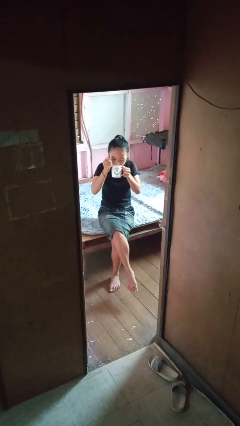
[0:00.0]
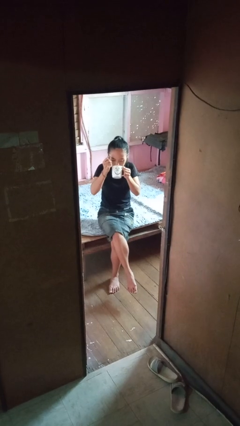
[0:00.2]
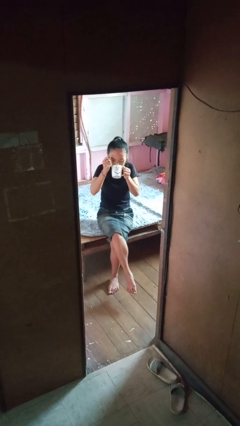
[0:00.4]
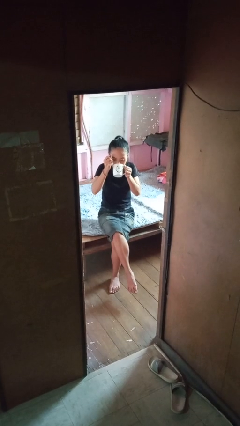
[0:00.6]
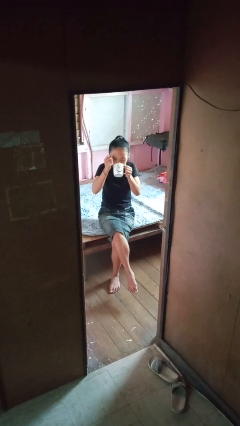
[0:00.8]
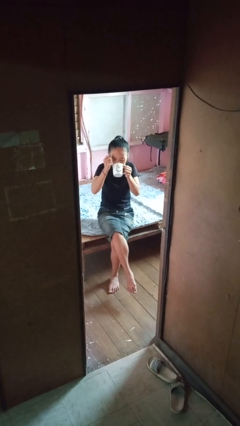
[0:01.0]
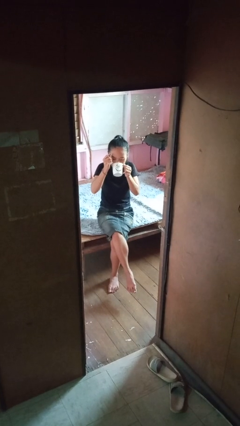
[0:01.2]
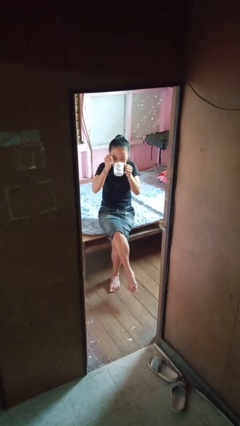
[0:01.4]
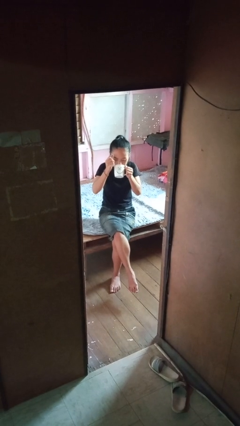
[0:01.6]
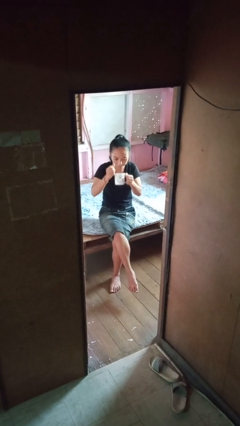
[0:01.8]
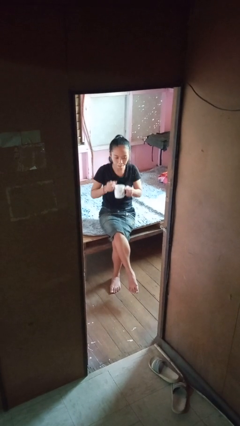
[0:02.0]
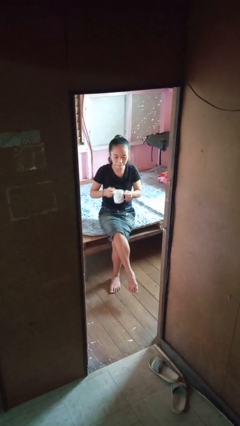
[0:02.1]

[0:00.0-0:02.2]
person drinks from mug

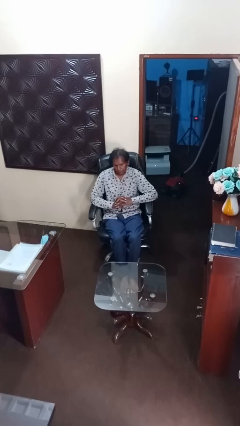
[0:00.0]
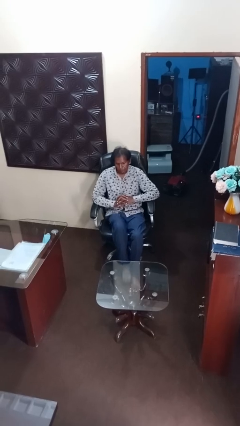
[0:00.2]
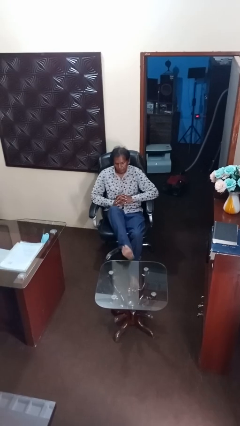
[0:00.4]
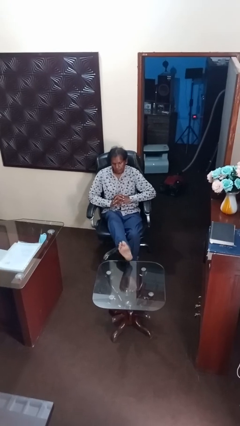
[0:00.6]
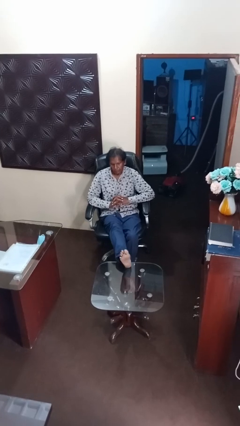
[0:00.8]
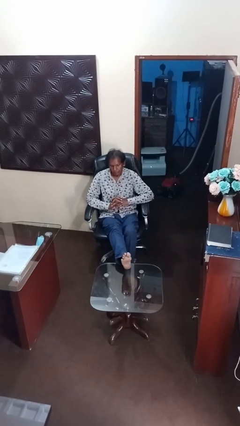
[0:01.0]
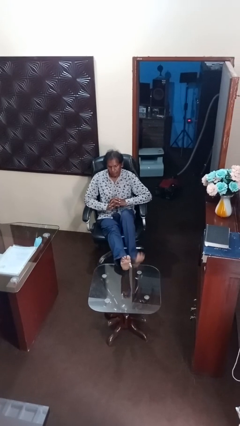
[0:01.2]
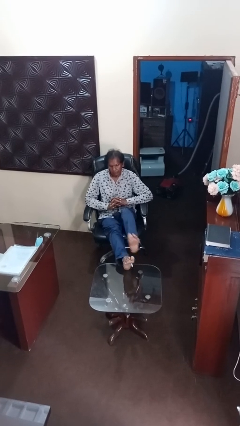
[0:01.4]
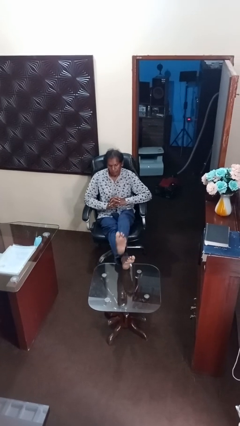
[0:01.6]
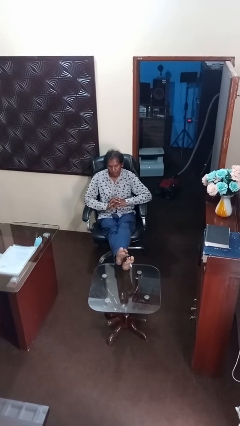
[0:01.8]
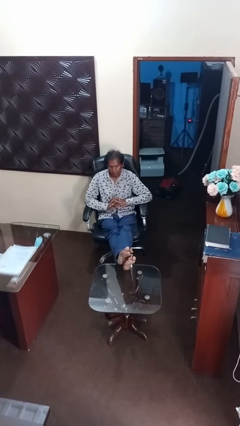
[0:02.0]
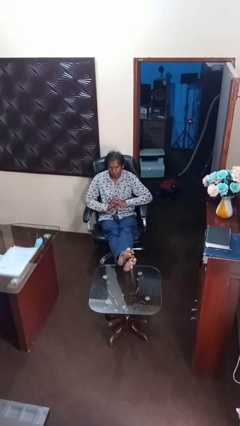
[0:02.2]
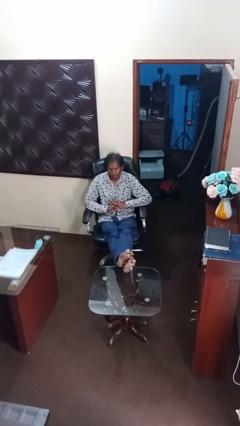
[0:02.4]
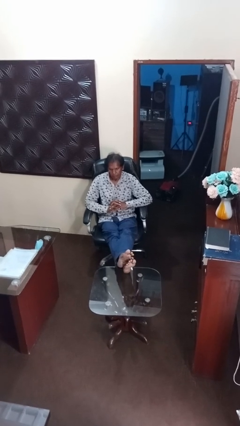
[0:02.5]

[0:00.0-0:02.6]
person puts feet up

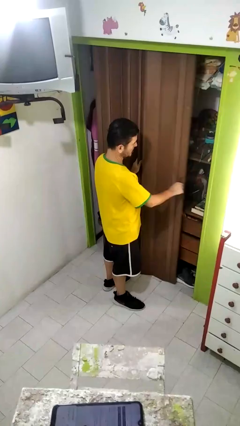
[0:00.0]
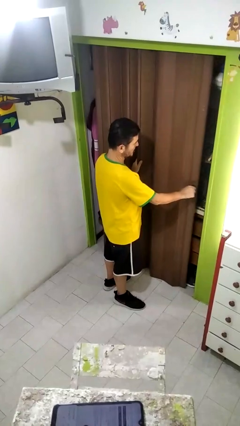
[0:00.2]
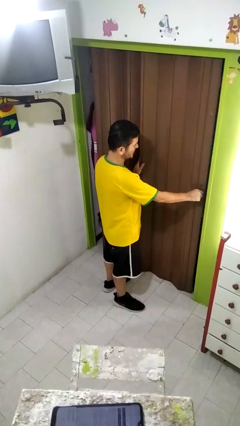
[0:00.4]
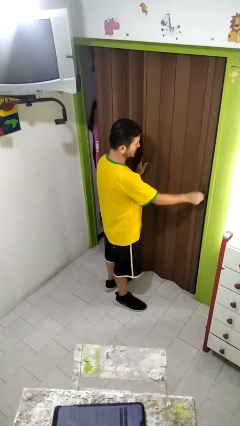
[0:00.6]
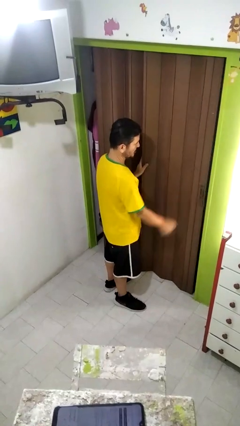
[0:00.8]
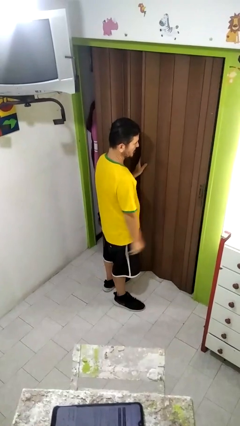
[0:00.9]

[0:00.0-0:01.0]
person closes closet door

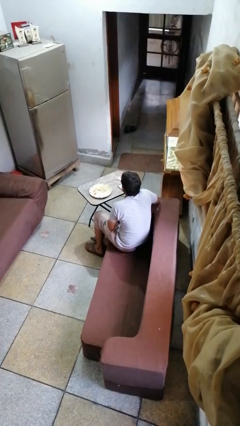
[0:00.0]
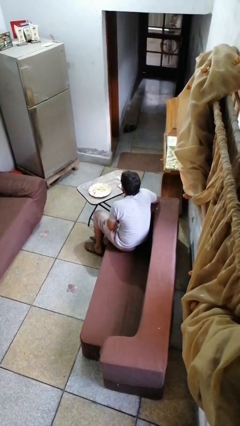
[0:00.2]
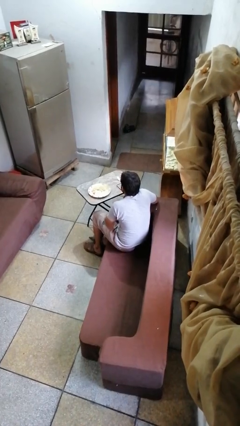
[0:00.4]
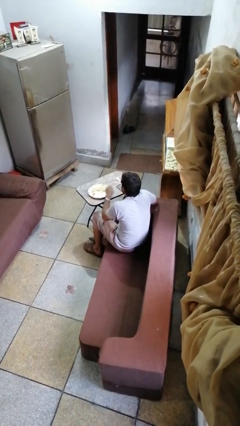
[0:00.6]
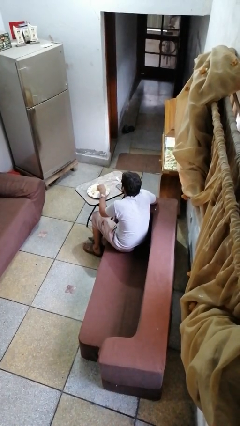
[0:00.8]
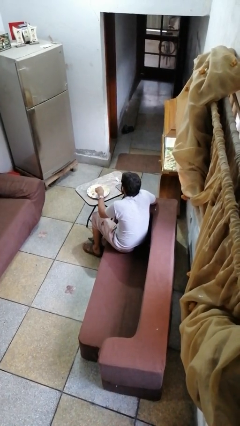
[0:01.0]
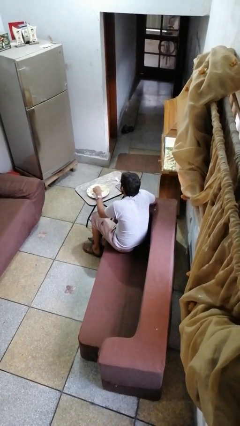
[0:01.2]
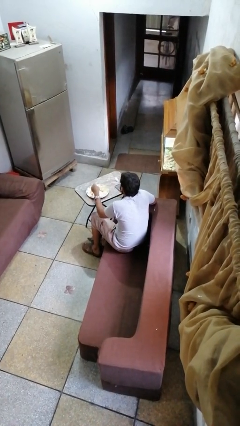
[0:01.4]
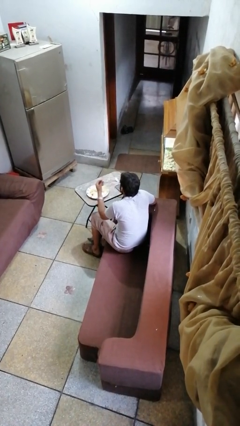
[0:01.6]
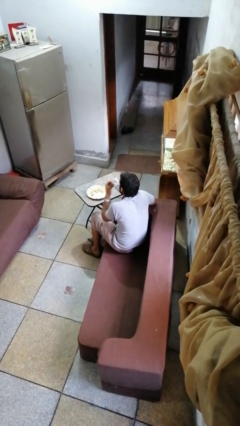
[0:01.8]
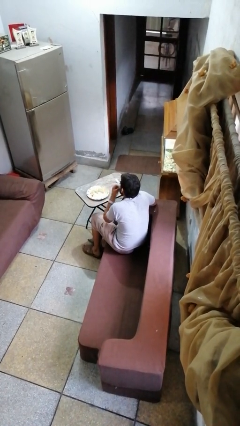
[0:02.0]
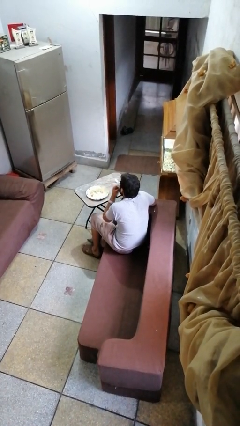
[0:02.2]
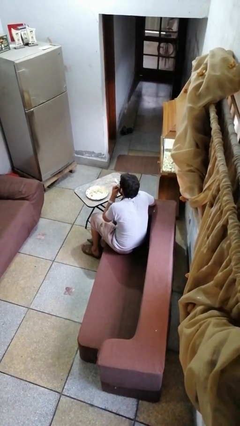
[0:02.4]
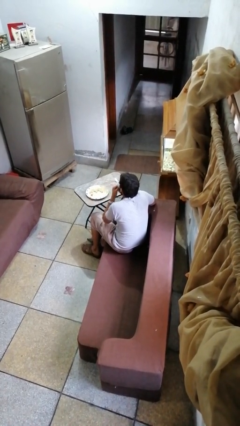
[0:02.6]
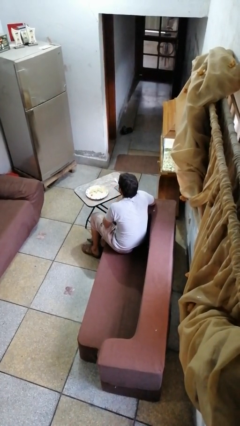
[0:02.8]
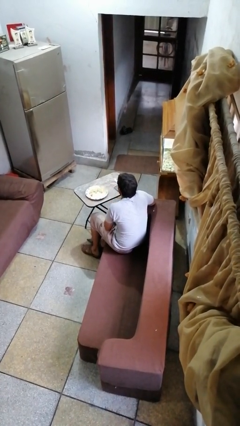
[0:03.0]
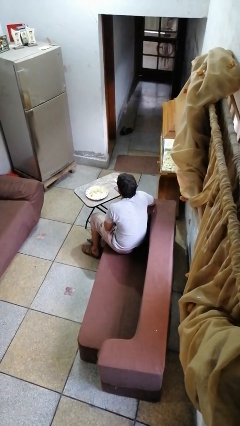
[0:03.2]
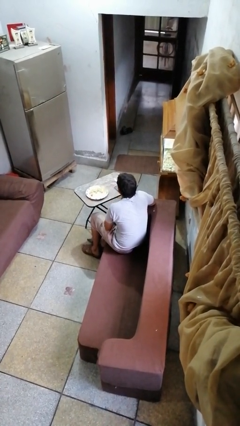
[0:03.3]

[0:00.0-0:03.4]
person eats with hands

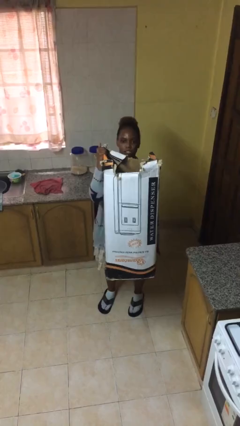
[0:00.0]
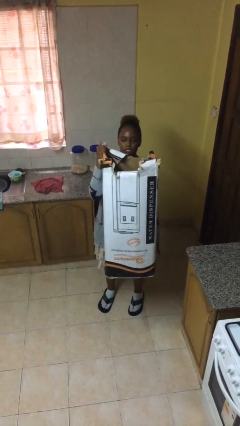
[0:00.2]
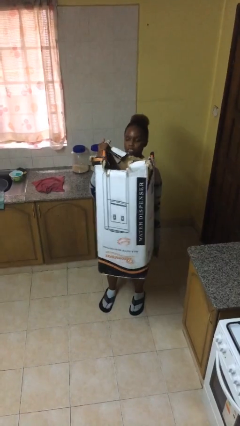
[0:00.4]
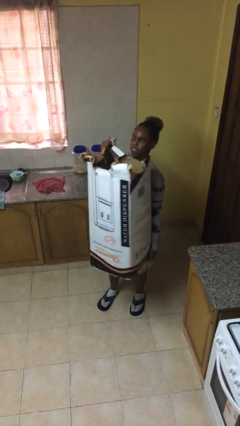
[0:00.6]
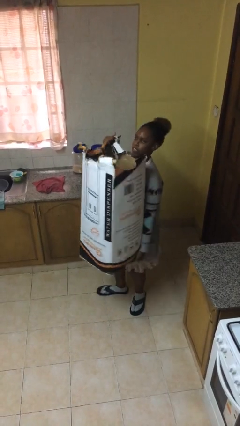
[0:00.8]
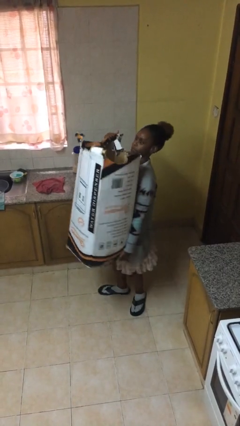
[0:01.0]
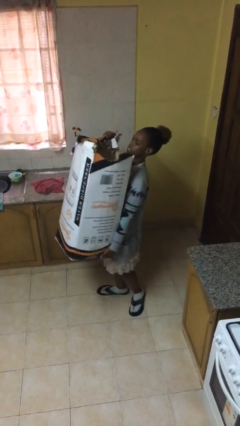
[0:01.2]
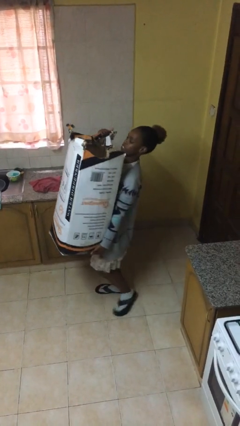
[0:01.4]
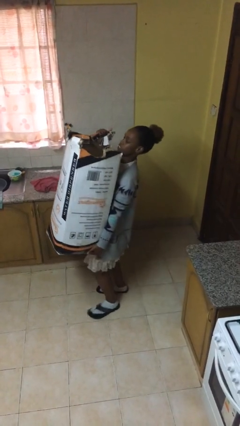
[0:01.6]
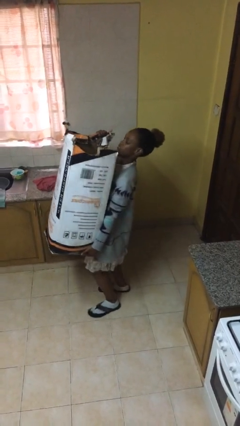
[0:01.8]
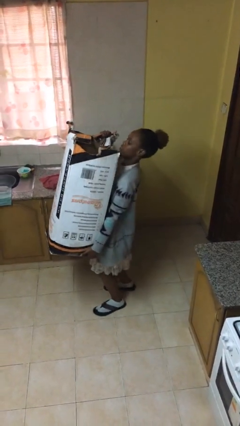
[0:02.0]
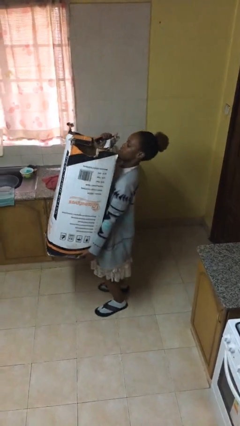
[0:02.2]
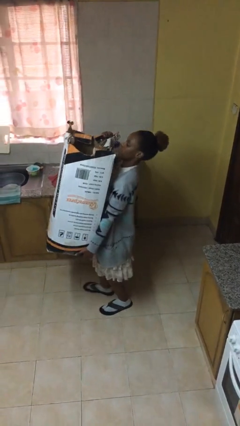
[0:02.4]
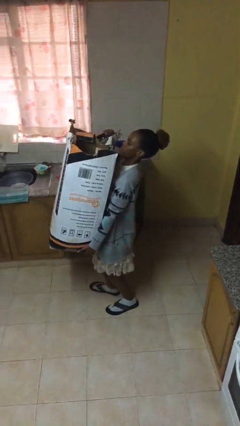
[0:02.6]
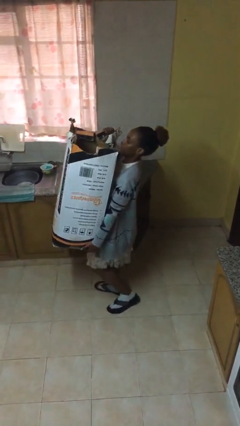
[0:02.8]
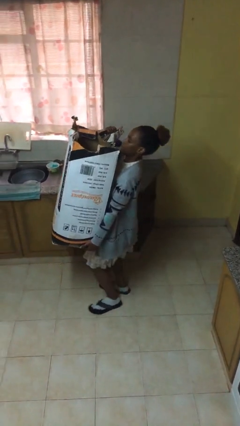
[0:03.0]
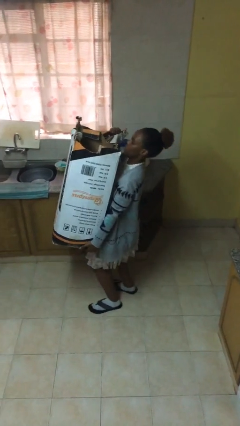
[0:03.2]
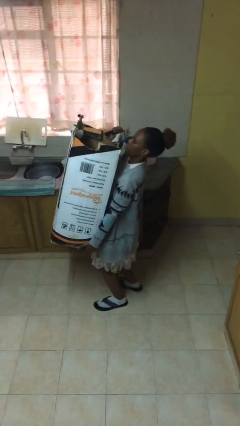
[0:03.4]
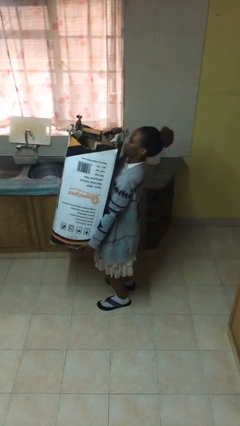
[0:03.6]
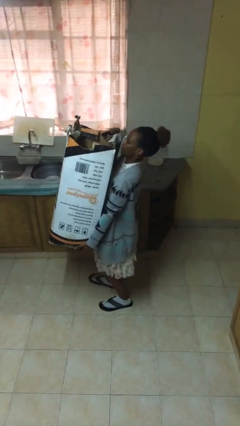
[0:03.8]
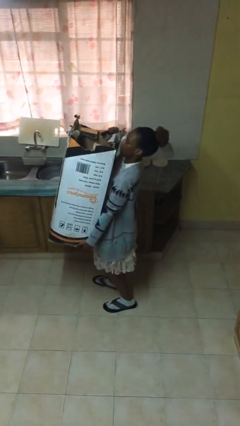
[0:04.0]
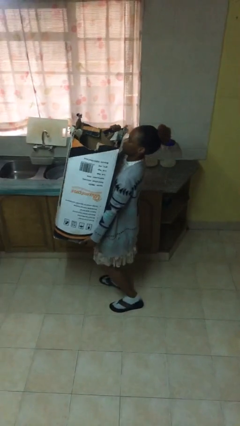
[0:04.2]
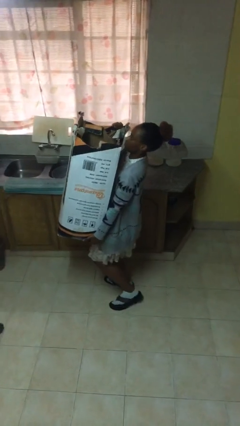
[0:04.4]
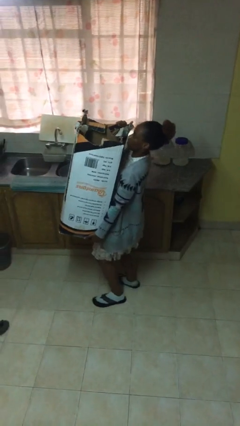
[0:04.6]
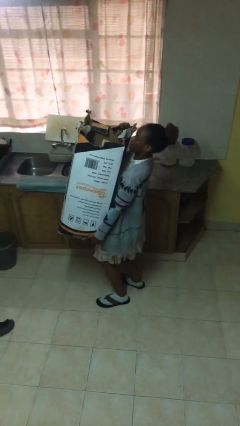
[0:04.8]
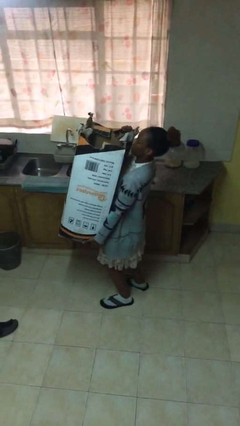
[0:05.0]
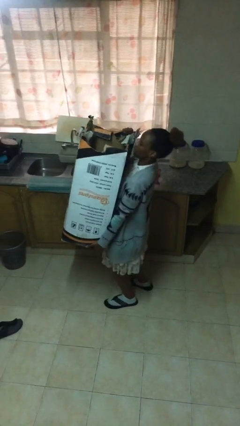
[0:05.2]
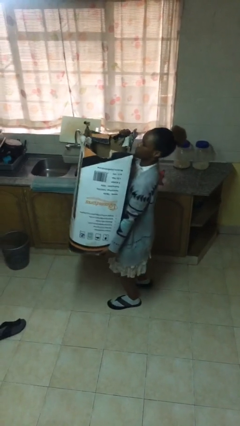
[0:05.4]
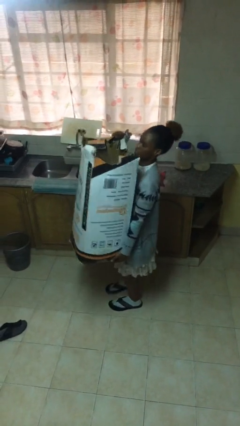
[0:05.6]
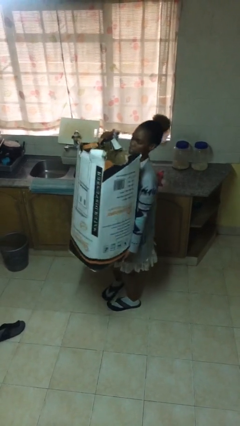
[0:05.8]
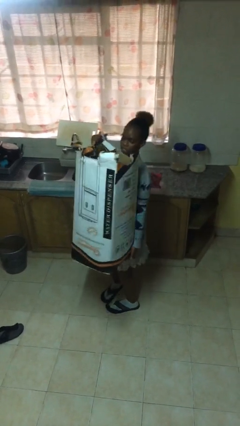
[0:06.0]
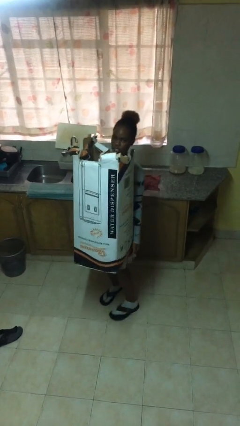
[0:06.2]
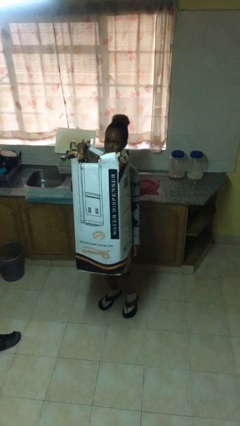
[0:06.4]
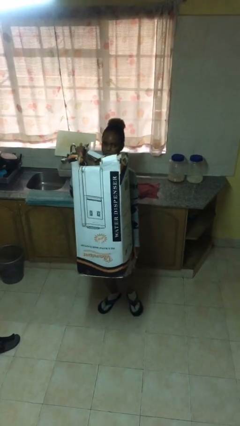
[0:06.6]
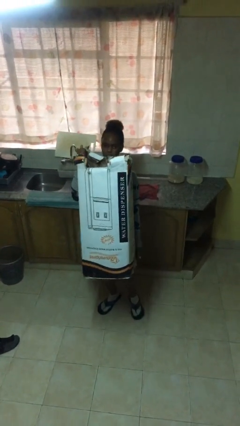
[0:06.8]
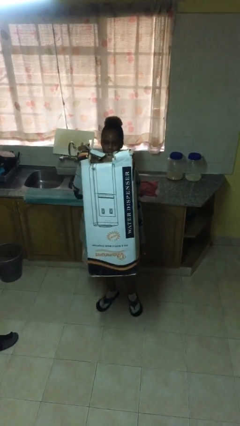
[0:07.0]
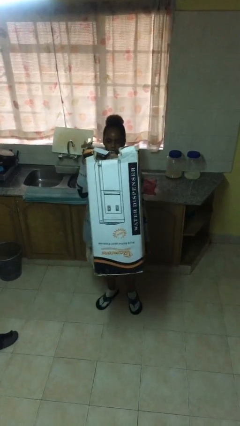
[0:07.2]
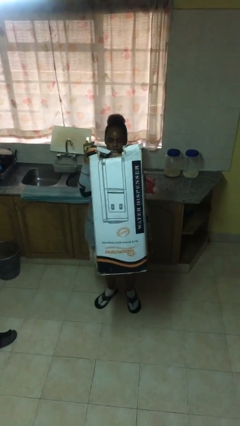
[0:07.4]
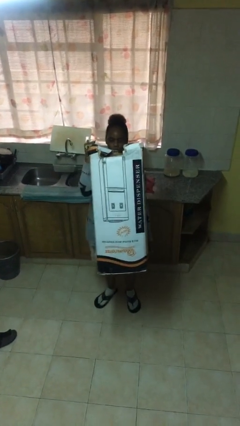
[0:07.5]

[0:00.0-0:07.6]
person carries heavy object

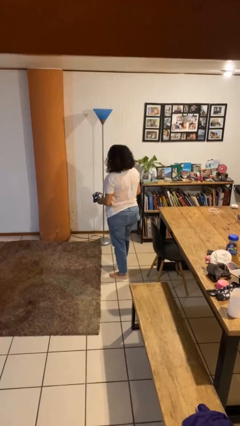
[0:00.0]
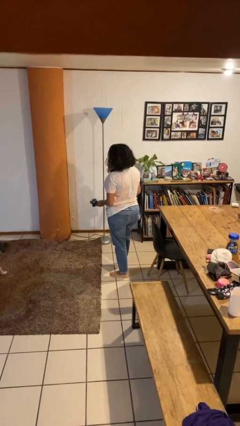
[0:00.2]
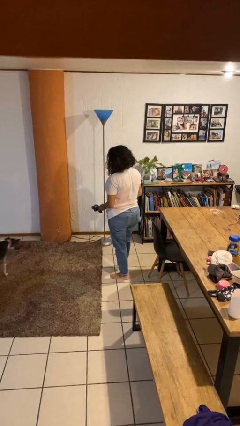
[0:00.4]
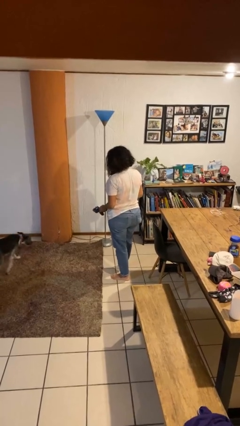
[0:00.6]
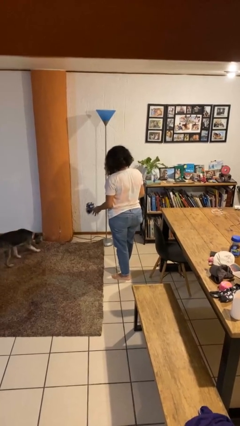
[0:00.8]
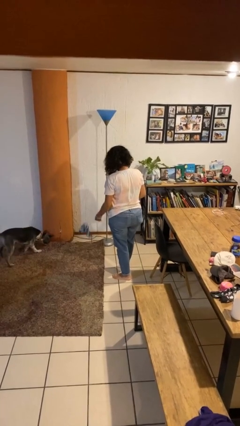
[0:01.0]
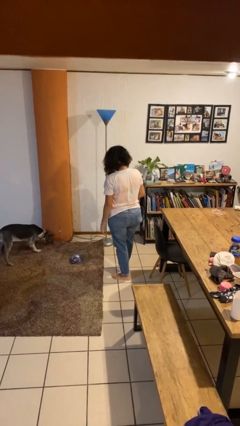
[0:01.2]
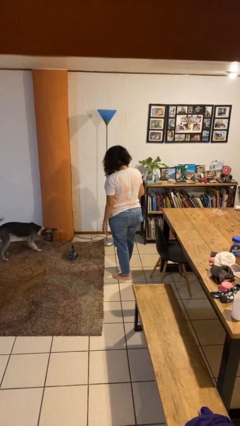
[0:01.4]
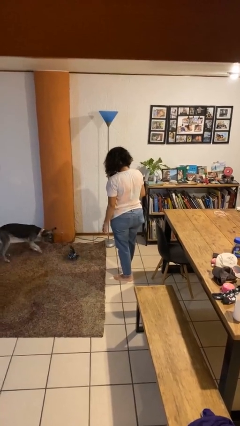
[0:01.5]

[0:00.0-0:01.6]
person throws object to ground
